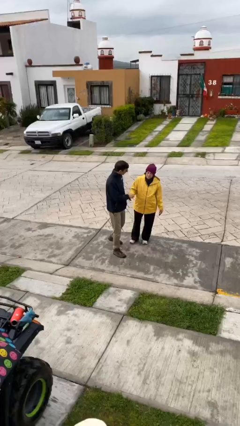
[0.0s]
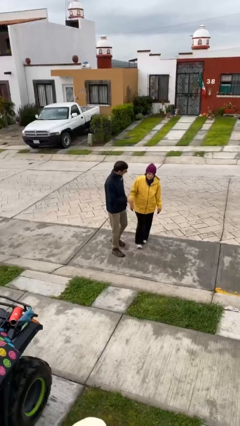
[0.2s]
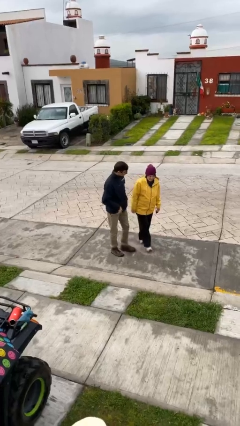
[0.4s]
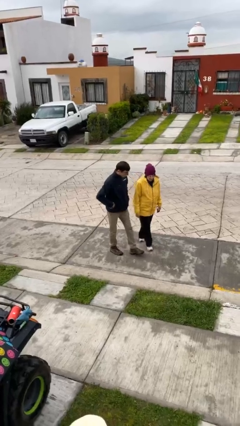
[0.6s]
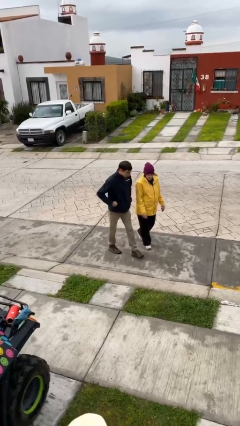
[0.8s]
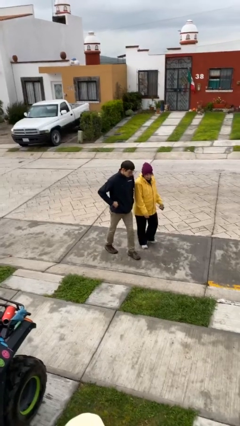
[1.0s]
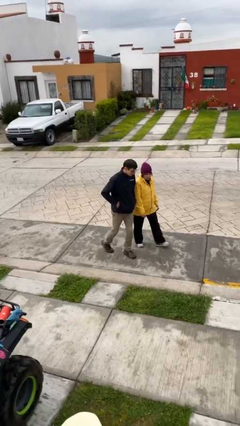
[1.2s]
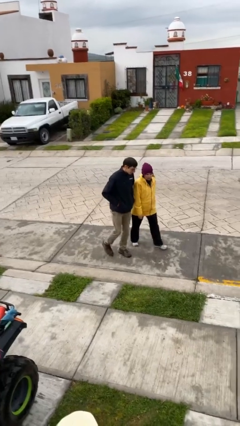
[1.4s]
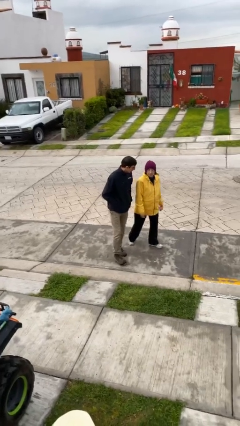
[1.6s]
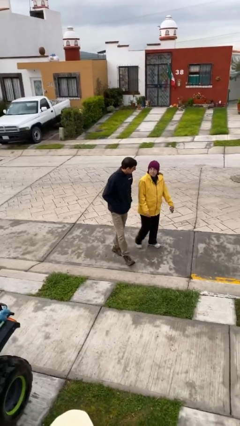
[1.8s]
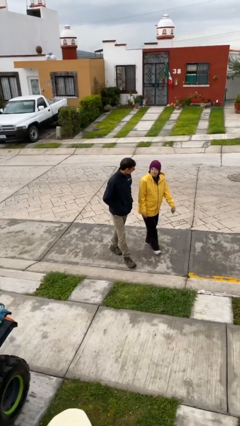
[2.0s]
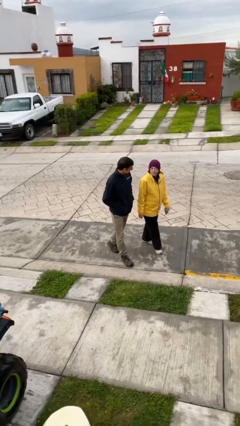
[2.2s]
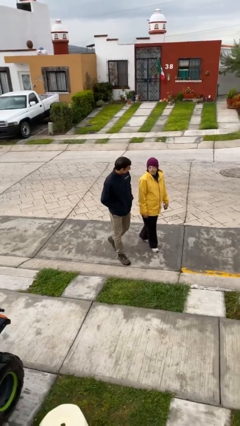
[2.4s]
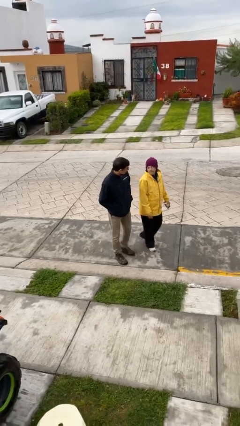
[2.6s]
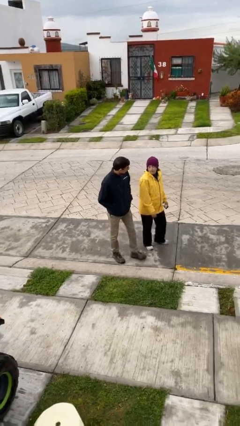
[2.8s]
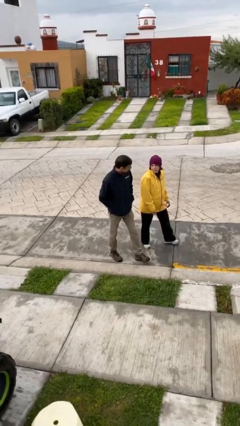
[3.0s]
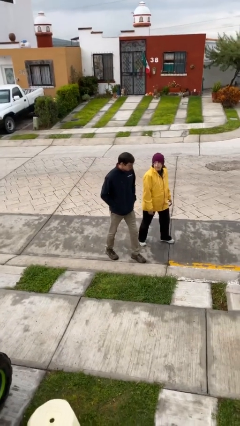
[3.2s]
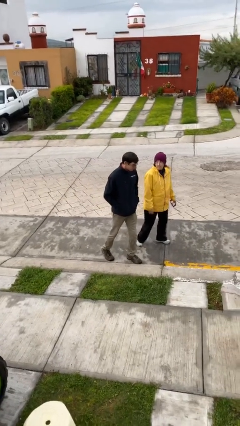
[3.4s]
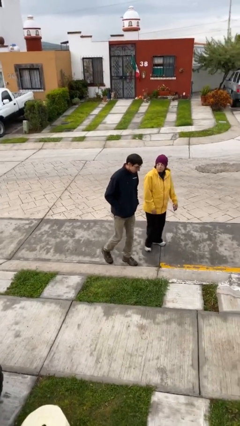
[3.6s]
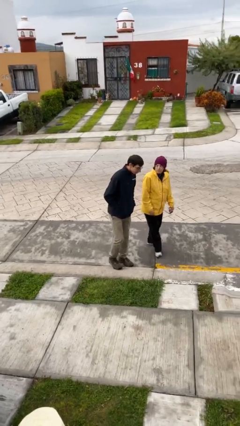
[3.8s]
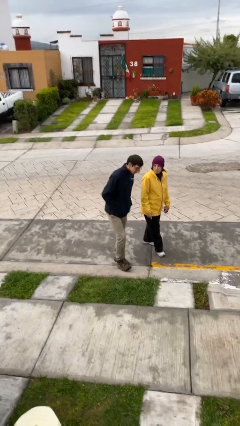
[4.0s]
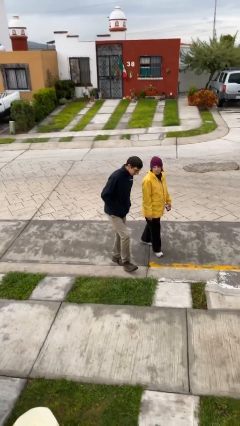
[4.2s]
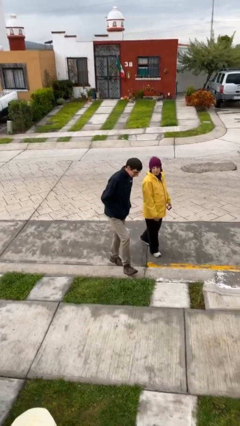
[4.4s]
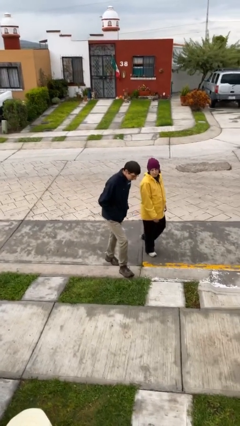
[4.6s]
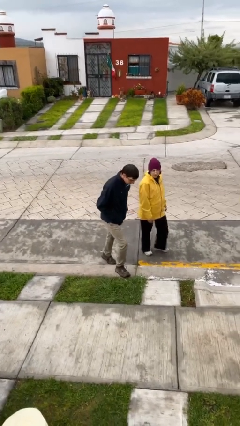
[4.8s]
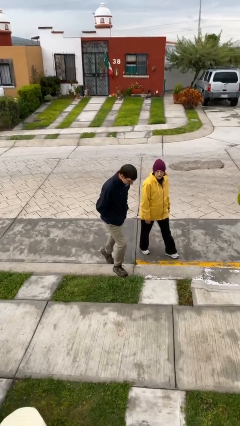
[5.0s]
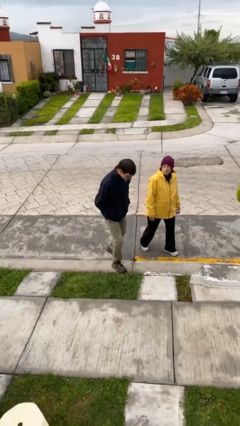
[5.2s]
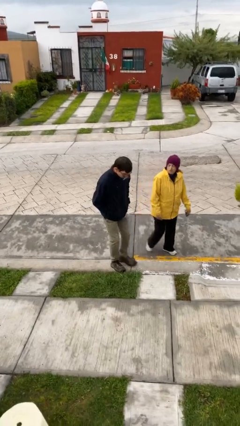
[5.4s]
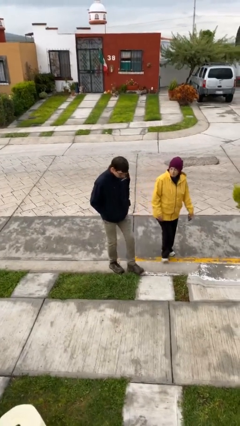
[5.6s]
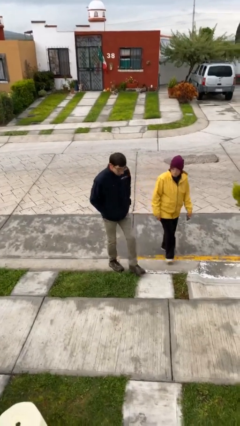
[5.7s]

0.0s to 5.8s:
person talks to person

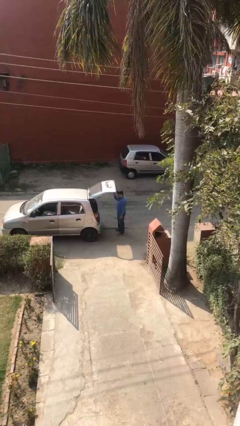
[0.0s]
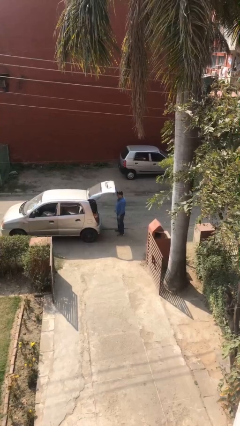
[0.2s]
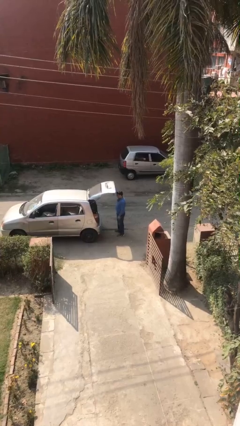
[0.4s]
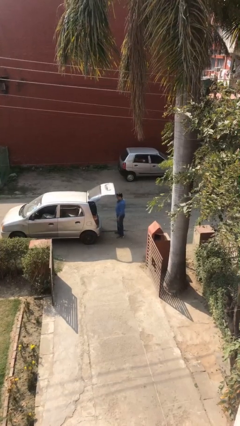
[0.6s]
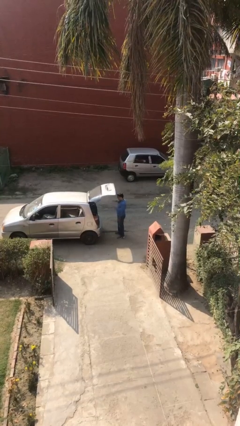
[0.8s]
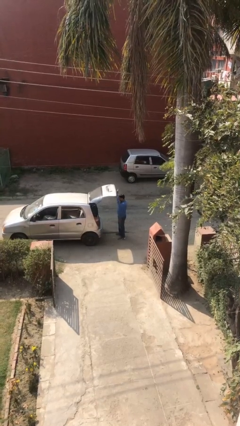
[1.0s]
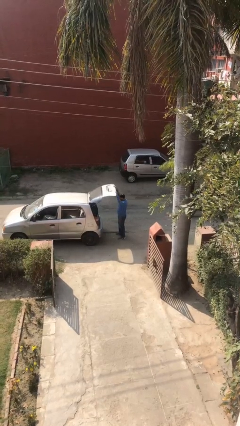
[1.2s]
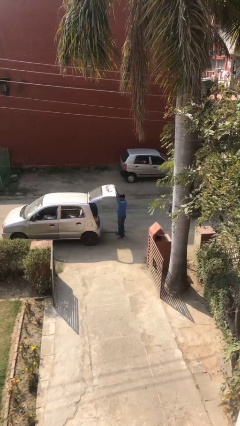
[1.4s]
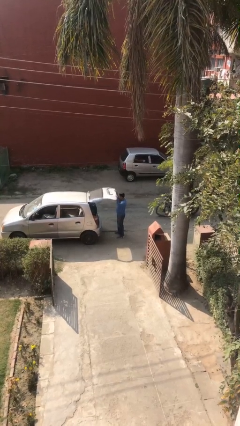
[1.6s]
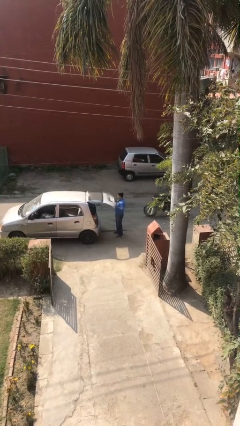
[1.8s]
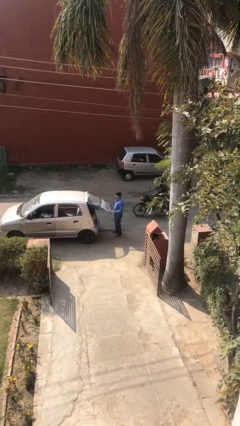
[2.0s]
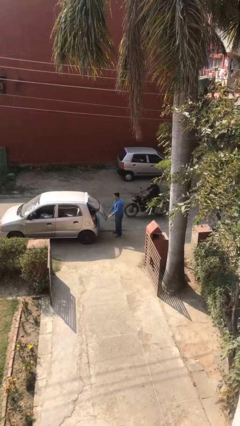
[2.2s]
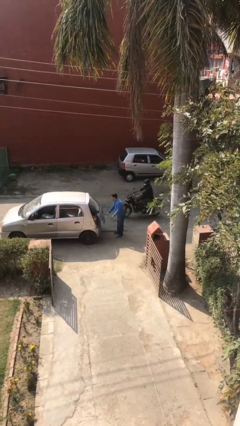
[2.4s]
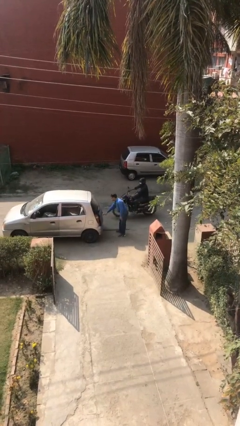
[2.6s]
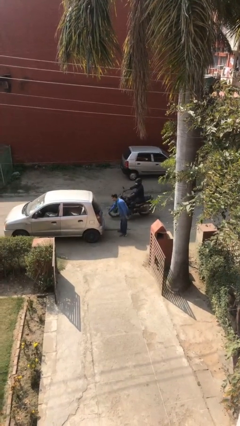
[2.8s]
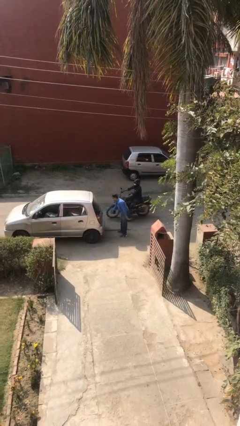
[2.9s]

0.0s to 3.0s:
person closes car trunk

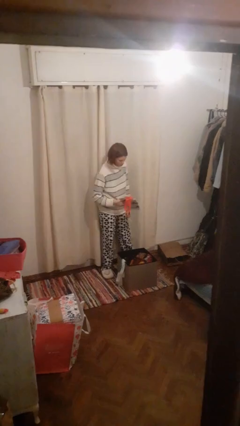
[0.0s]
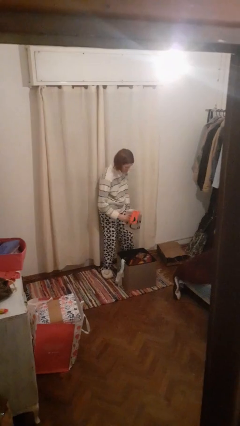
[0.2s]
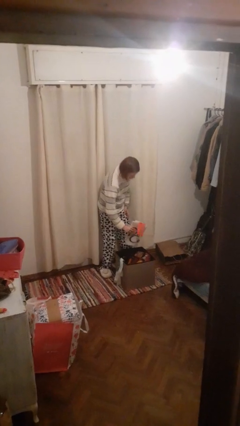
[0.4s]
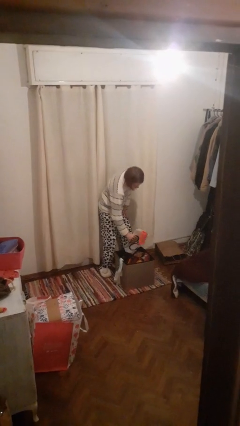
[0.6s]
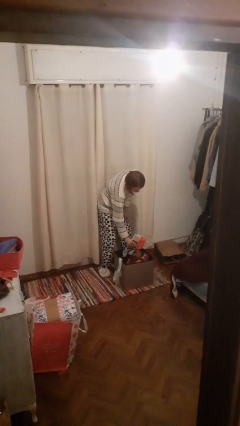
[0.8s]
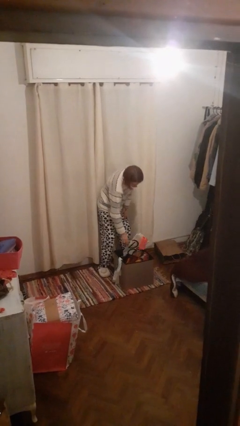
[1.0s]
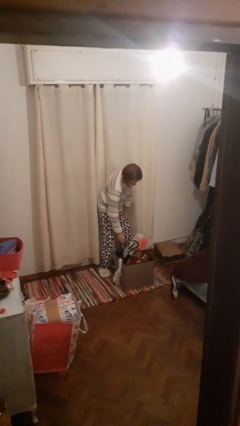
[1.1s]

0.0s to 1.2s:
person puts object into basket

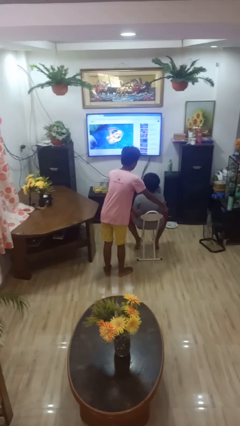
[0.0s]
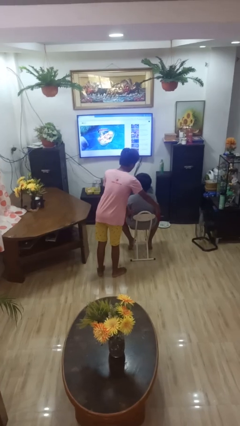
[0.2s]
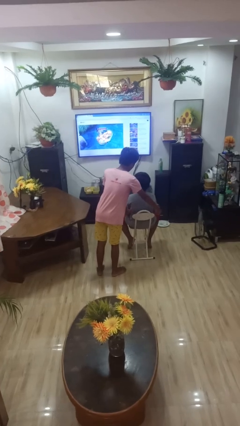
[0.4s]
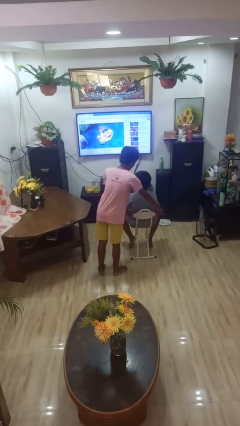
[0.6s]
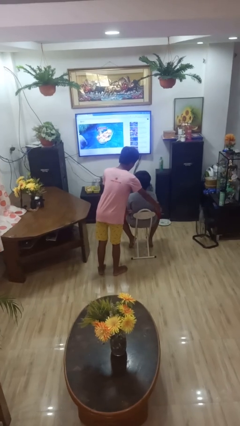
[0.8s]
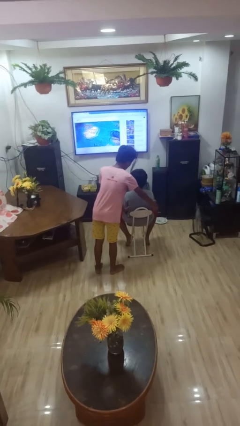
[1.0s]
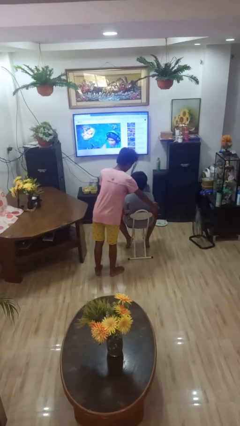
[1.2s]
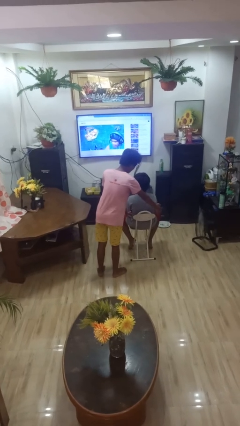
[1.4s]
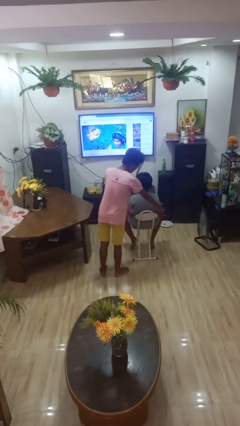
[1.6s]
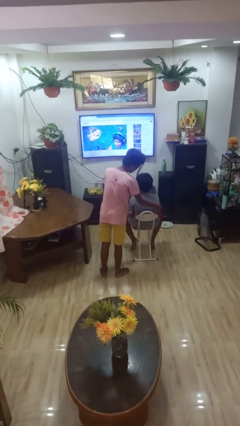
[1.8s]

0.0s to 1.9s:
person tickles person

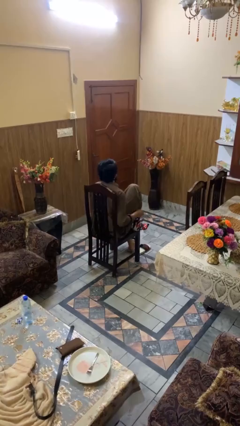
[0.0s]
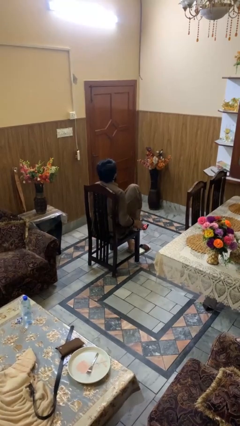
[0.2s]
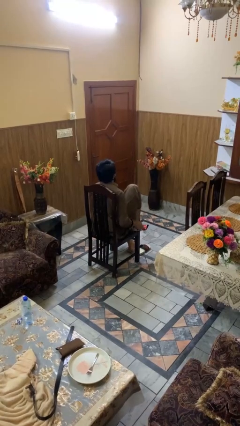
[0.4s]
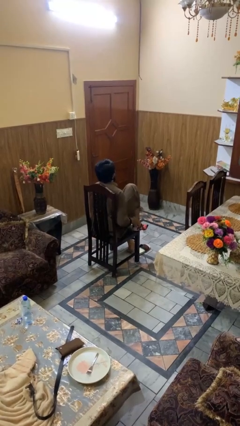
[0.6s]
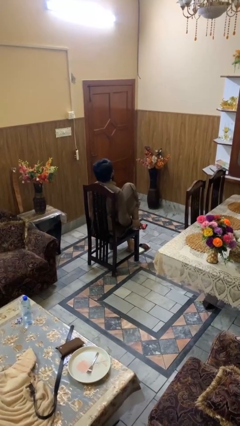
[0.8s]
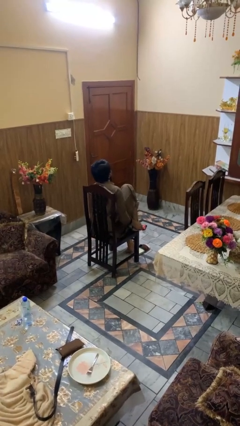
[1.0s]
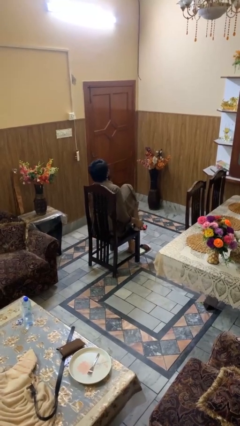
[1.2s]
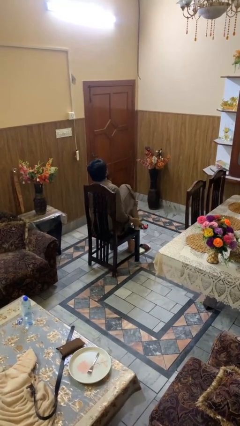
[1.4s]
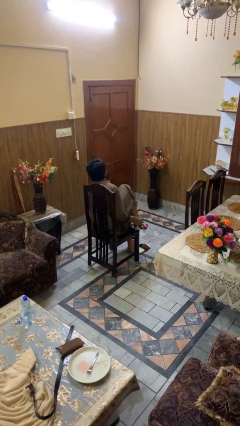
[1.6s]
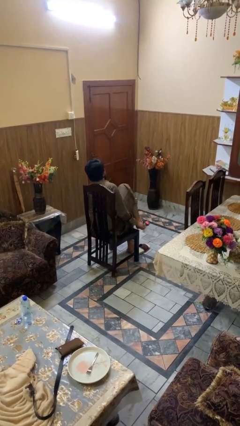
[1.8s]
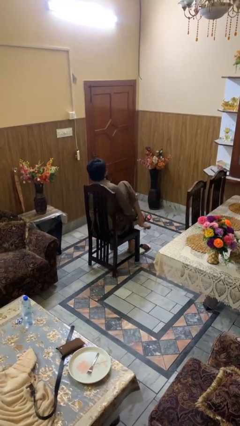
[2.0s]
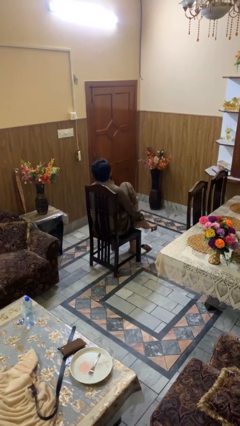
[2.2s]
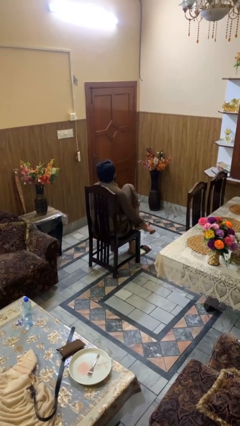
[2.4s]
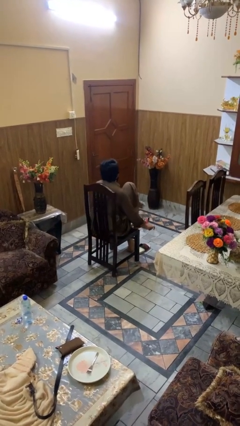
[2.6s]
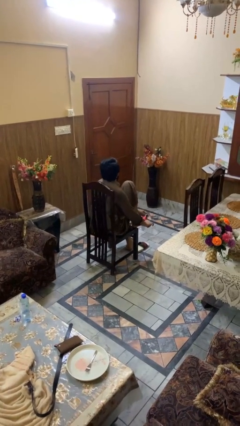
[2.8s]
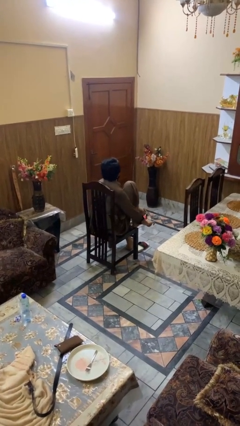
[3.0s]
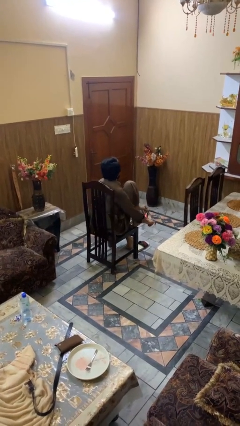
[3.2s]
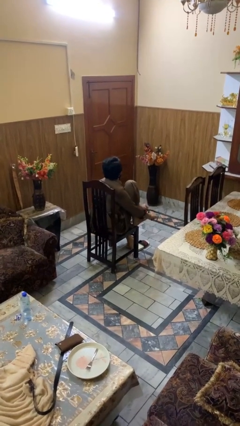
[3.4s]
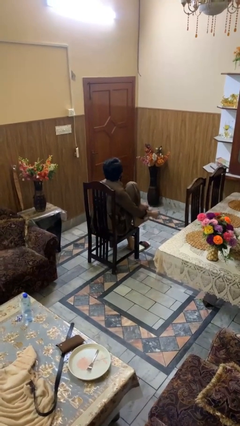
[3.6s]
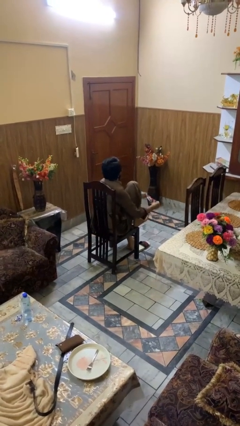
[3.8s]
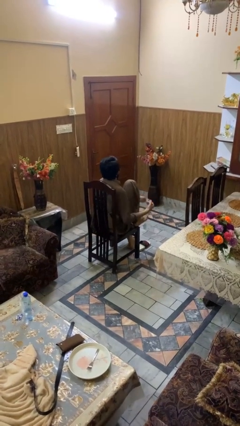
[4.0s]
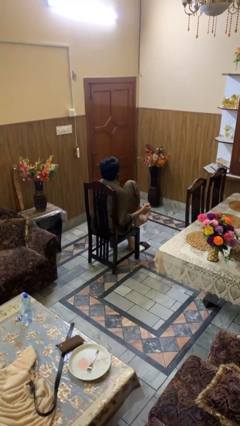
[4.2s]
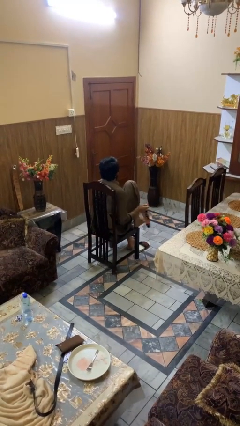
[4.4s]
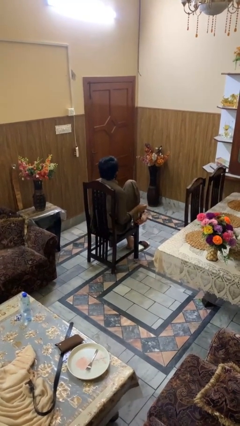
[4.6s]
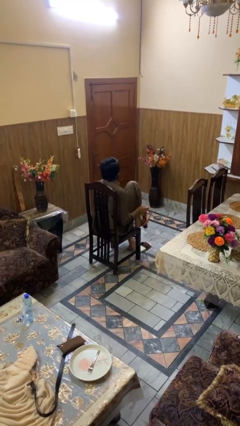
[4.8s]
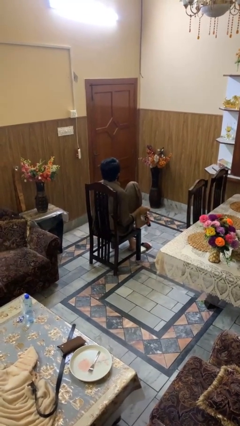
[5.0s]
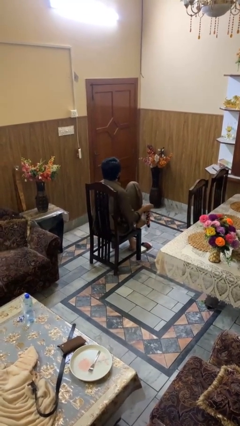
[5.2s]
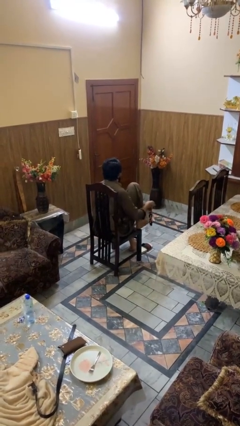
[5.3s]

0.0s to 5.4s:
person takes off socks

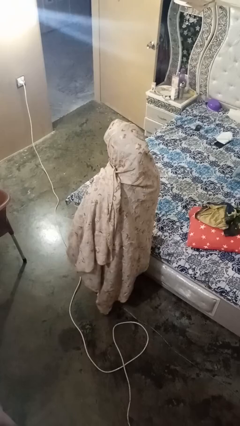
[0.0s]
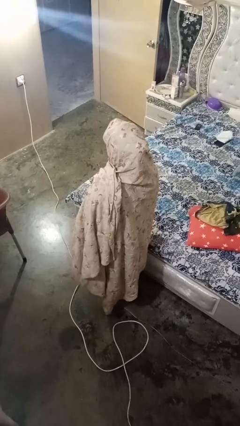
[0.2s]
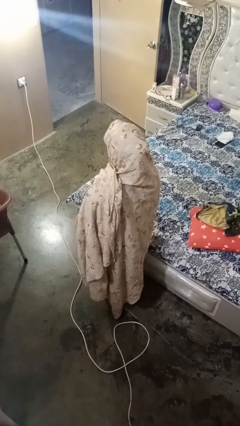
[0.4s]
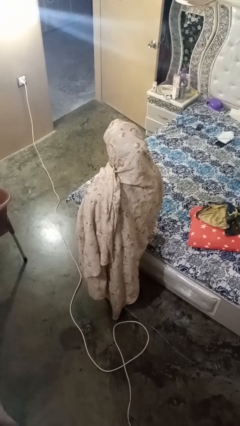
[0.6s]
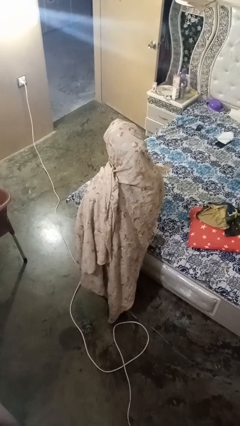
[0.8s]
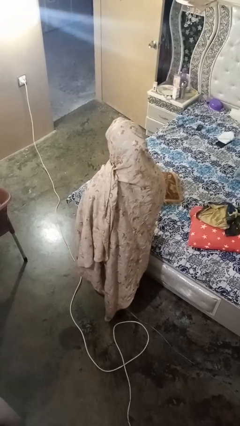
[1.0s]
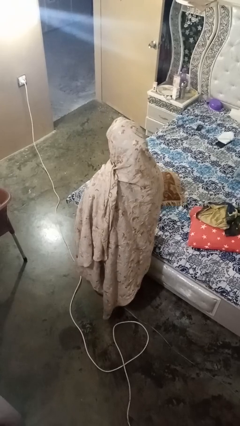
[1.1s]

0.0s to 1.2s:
person puts down object on bed
